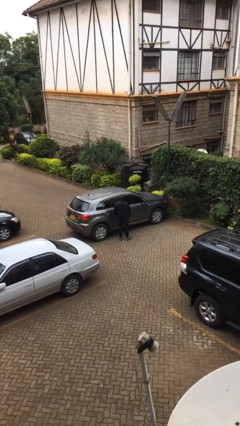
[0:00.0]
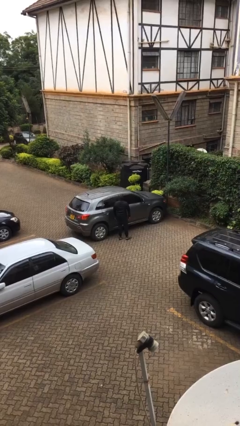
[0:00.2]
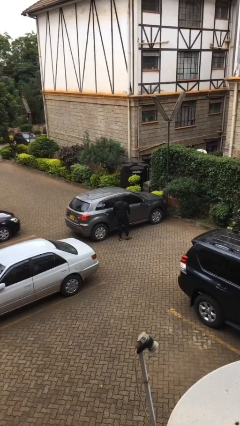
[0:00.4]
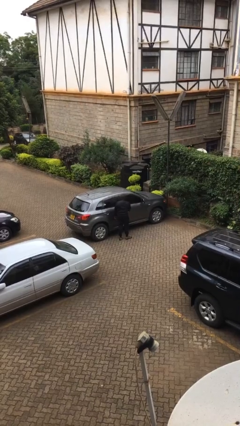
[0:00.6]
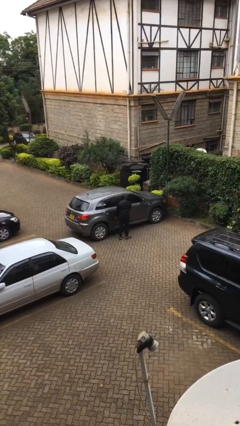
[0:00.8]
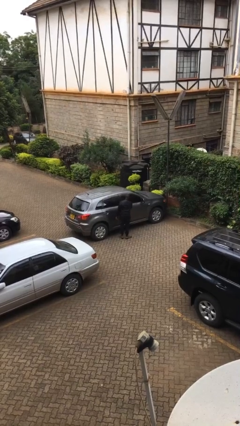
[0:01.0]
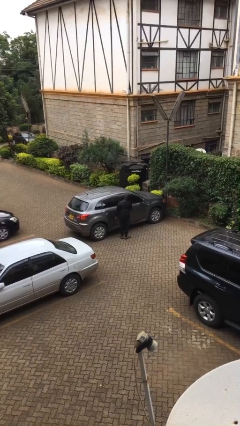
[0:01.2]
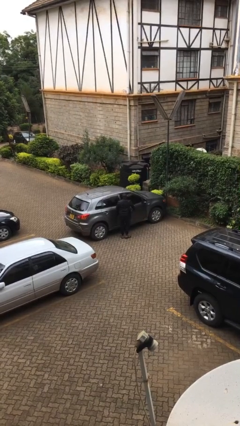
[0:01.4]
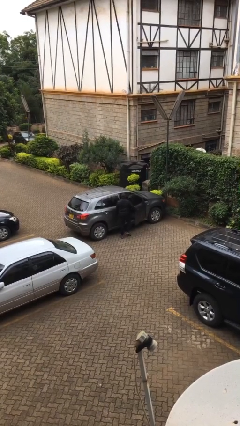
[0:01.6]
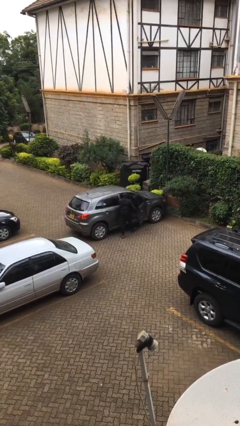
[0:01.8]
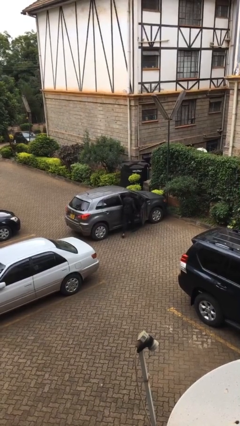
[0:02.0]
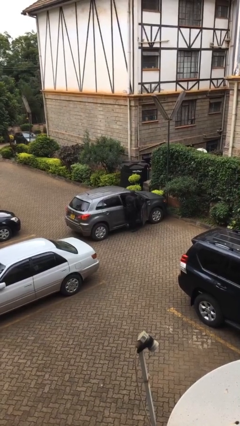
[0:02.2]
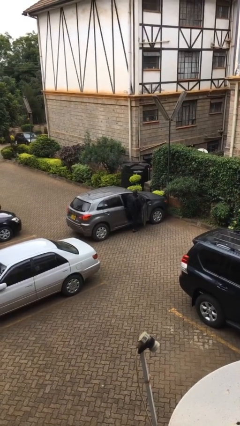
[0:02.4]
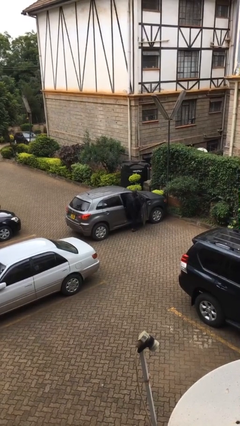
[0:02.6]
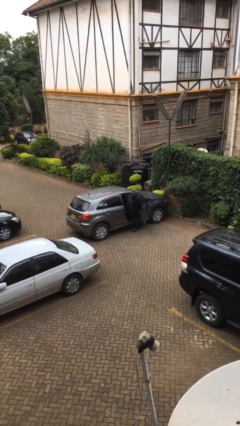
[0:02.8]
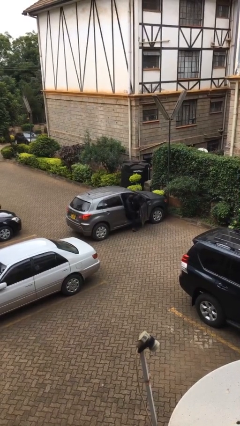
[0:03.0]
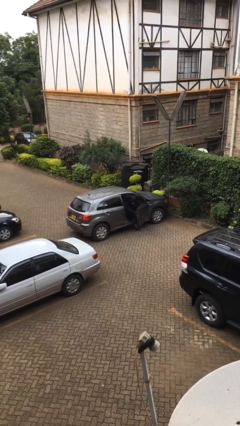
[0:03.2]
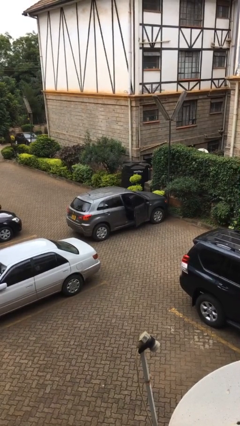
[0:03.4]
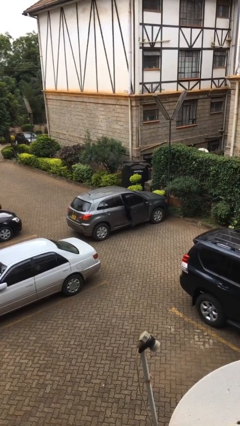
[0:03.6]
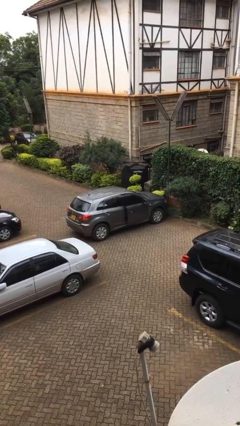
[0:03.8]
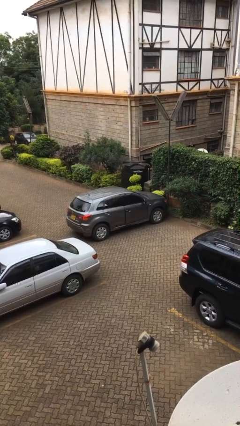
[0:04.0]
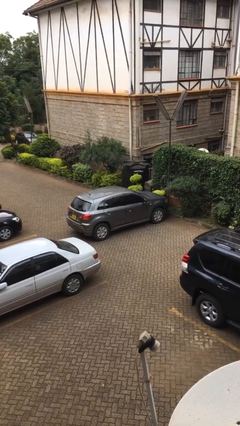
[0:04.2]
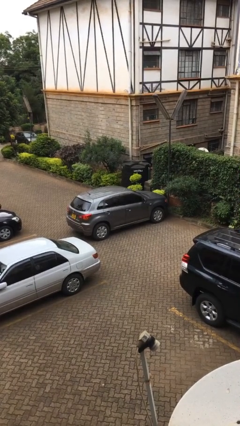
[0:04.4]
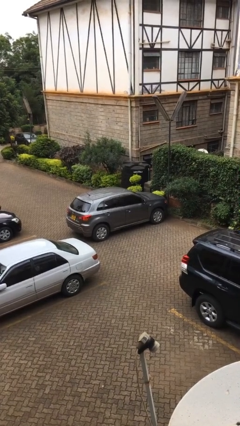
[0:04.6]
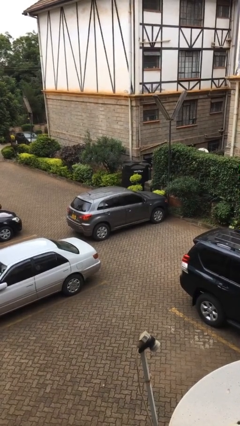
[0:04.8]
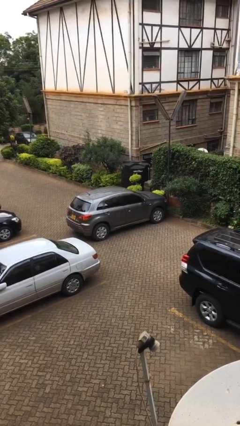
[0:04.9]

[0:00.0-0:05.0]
car picks up person

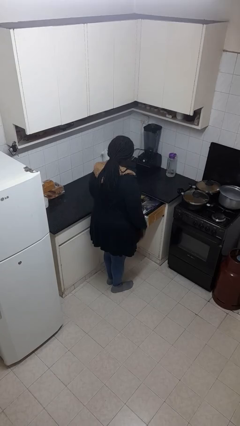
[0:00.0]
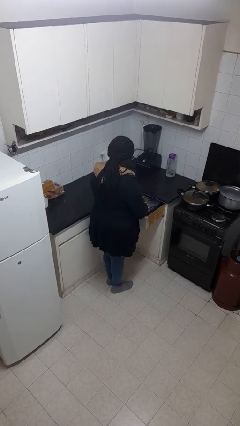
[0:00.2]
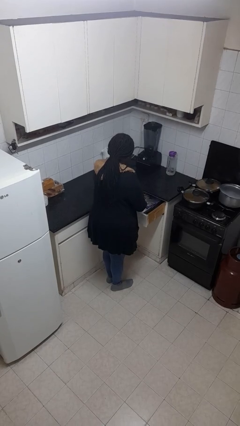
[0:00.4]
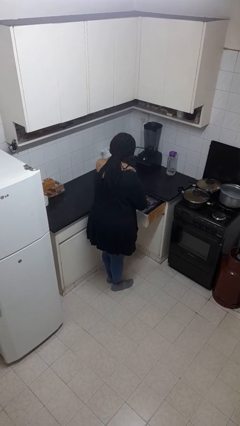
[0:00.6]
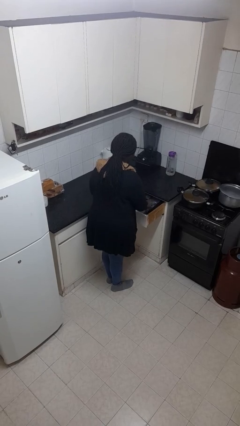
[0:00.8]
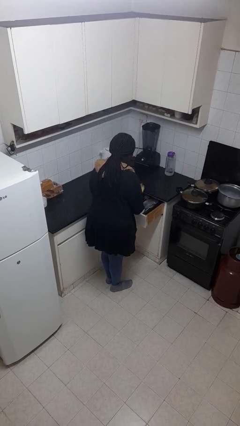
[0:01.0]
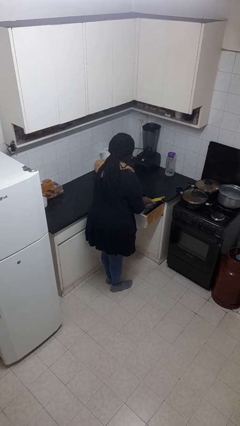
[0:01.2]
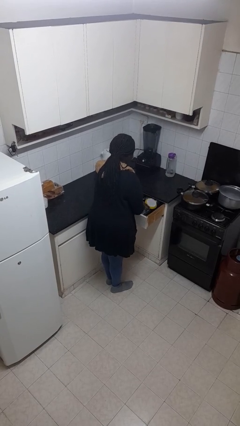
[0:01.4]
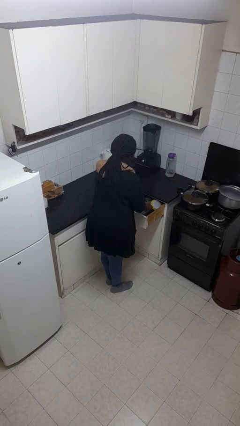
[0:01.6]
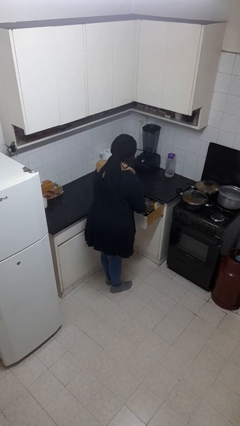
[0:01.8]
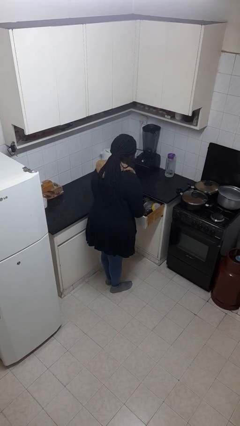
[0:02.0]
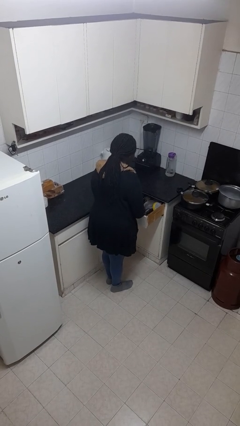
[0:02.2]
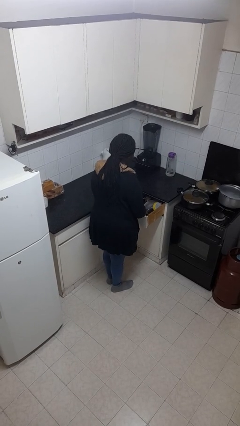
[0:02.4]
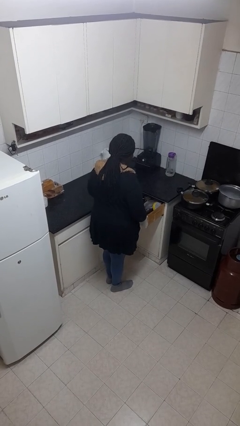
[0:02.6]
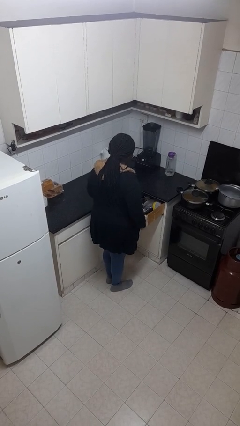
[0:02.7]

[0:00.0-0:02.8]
person searches in kitchen drawer

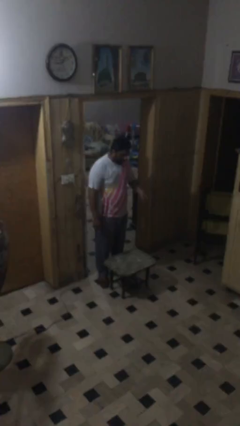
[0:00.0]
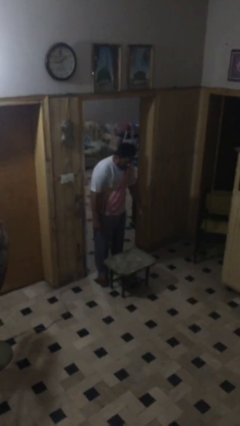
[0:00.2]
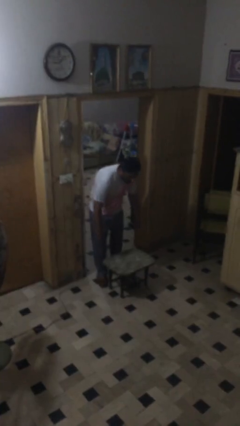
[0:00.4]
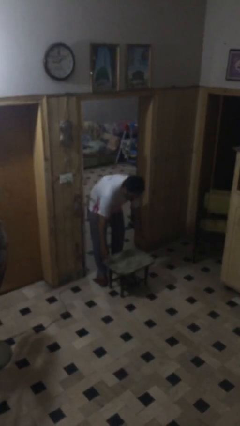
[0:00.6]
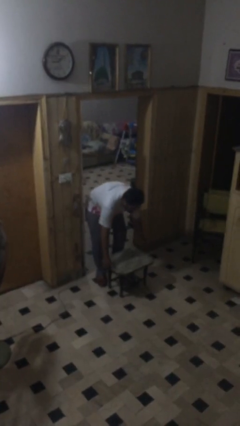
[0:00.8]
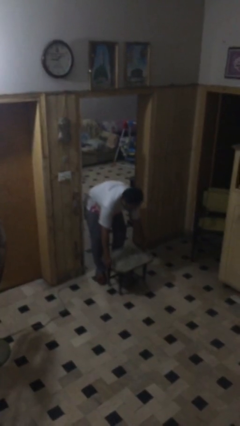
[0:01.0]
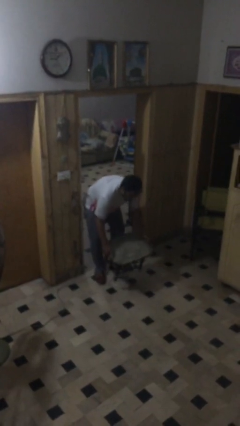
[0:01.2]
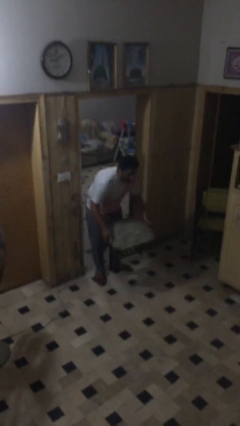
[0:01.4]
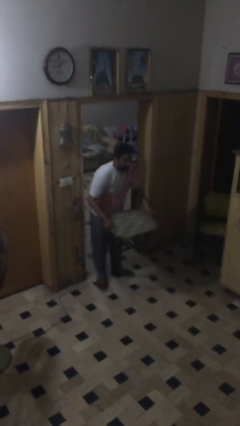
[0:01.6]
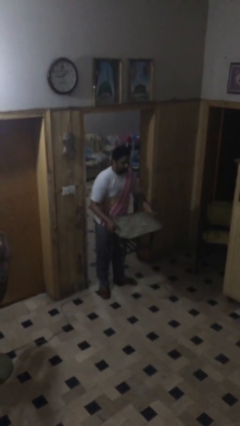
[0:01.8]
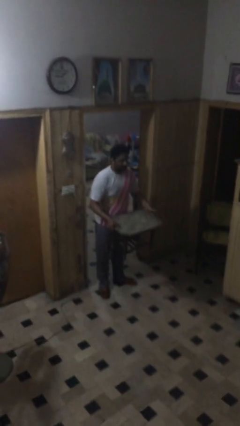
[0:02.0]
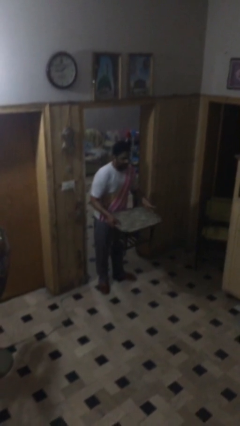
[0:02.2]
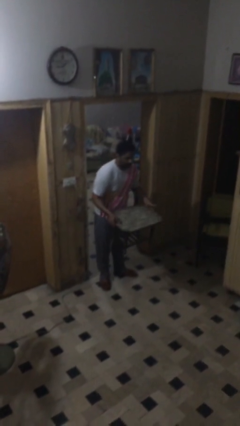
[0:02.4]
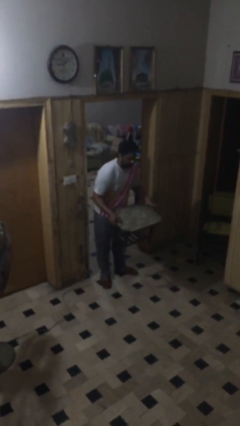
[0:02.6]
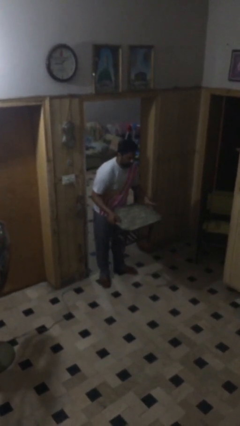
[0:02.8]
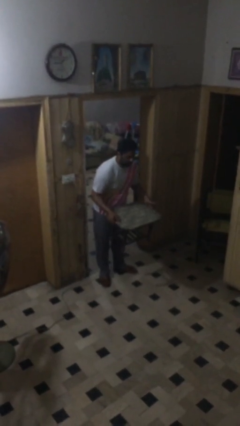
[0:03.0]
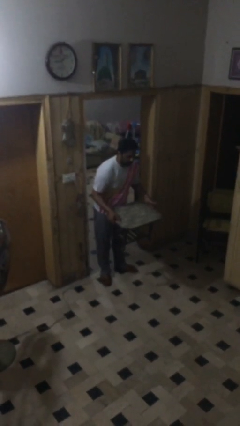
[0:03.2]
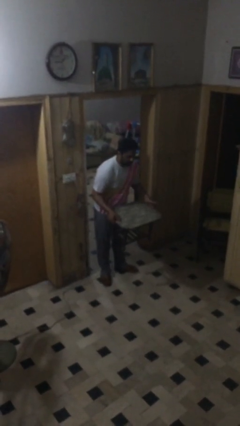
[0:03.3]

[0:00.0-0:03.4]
person picks up object from floor

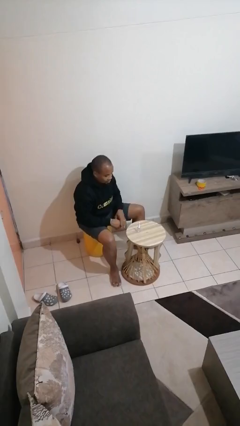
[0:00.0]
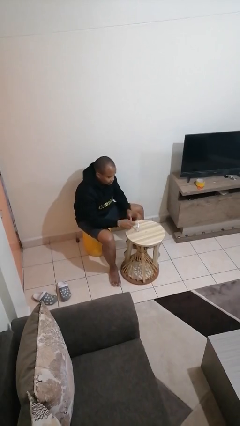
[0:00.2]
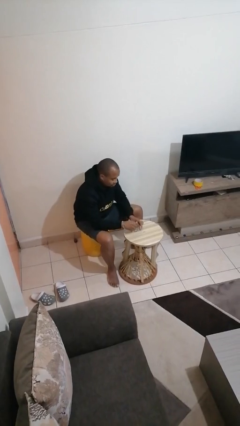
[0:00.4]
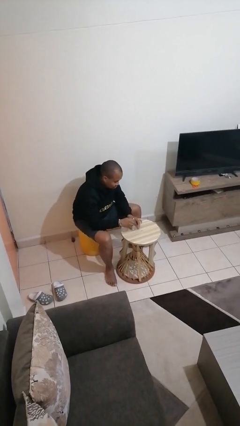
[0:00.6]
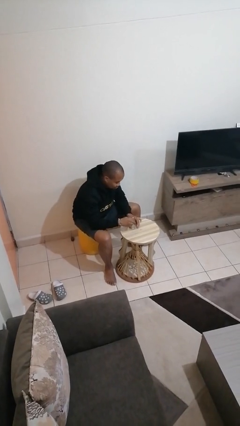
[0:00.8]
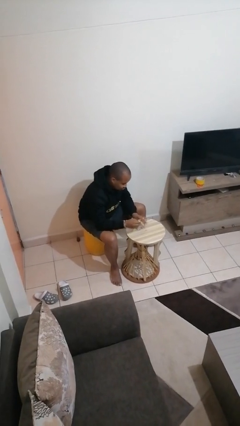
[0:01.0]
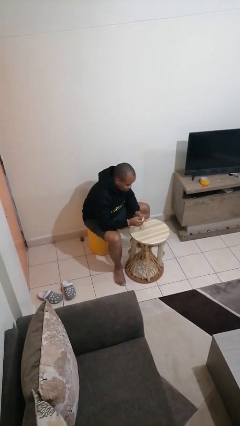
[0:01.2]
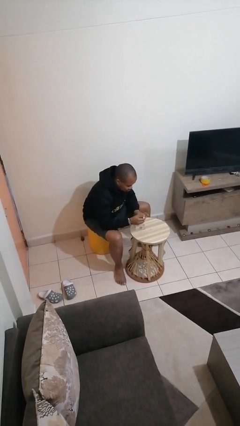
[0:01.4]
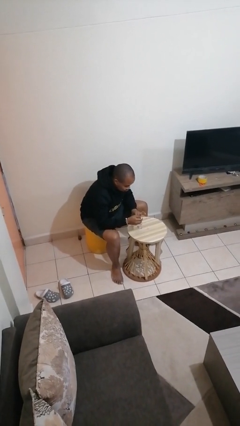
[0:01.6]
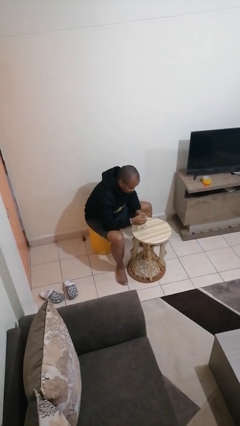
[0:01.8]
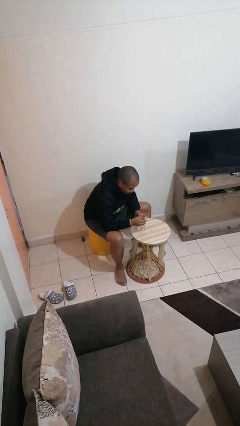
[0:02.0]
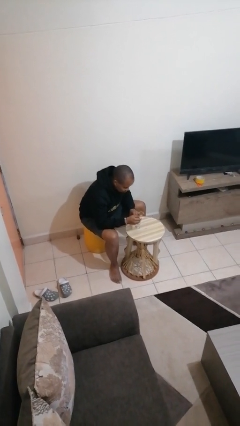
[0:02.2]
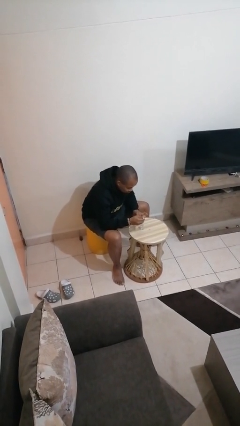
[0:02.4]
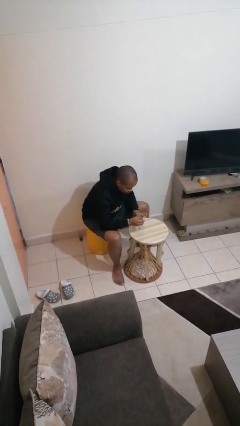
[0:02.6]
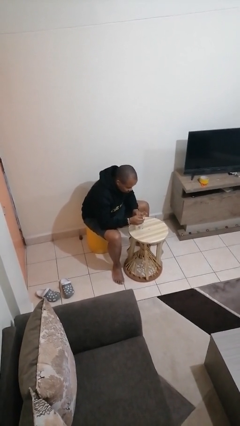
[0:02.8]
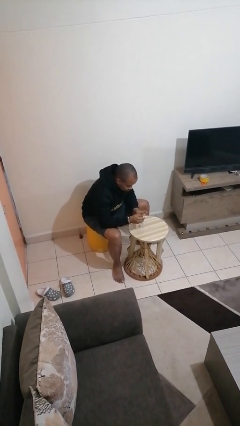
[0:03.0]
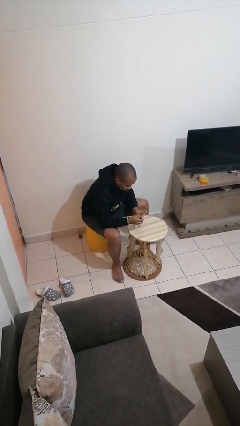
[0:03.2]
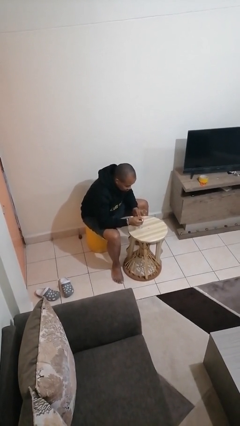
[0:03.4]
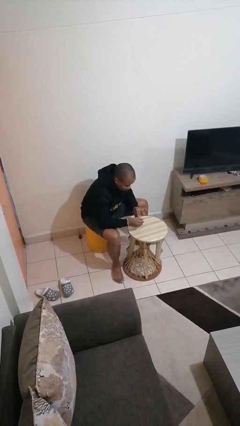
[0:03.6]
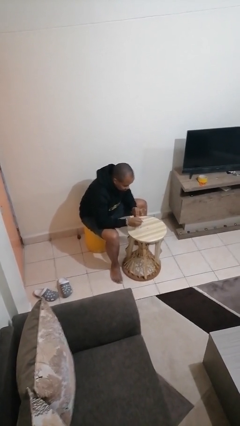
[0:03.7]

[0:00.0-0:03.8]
person paints fingernails

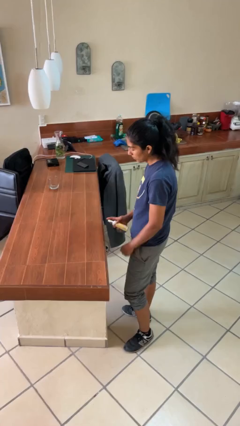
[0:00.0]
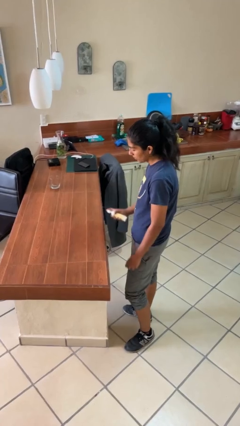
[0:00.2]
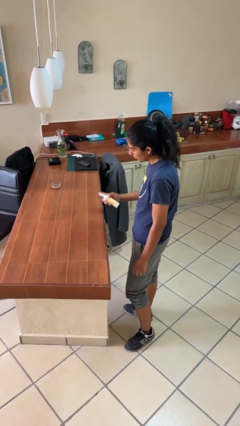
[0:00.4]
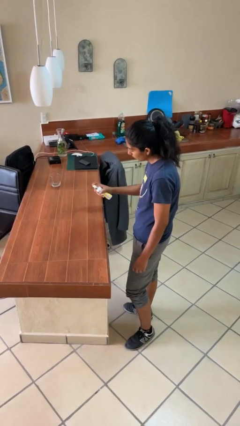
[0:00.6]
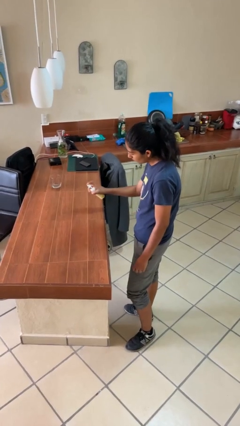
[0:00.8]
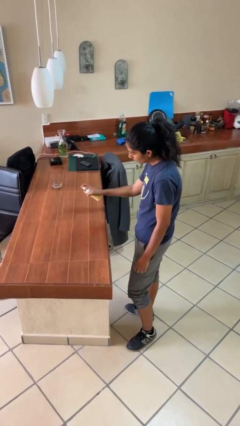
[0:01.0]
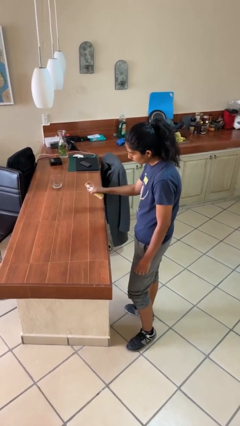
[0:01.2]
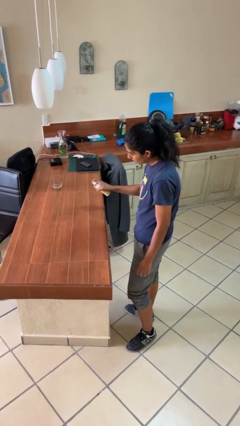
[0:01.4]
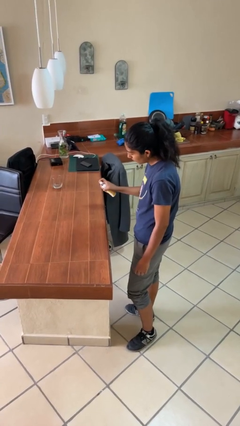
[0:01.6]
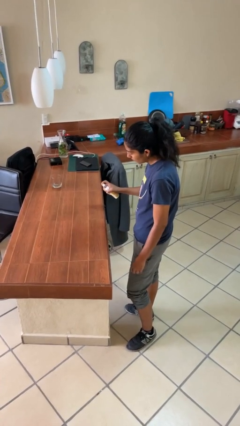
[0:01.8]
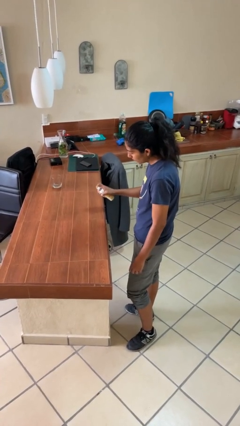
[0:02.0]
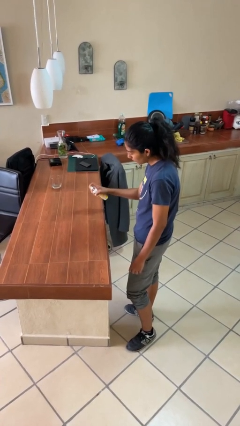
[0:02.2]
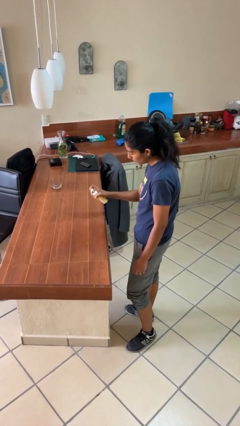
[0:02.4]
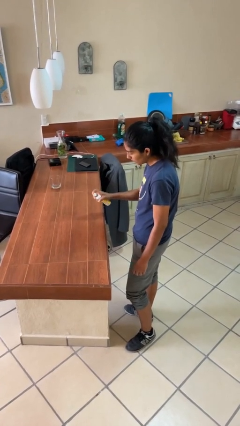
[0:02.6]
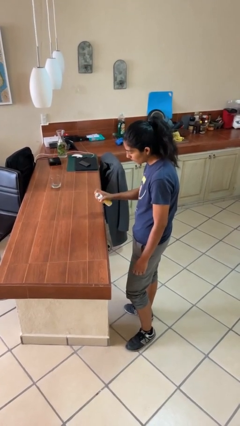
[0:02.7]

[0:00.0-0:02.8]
person sprays from bottle
